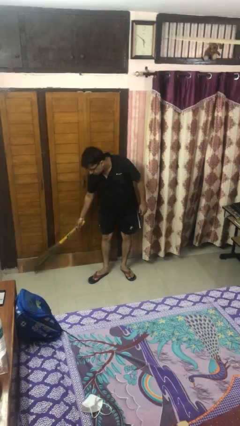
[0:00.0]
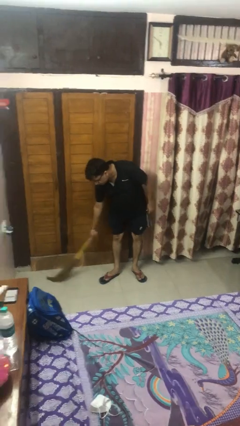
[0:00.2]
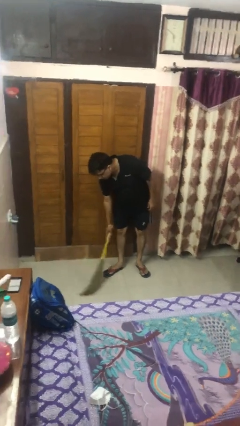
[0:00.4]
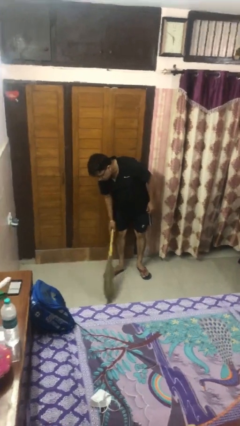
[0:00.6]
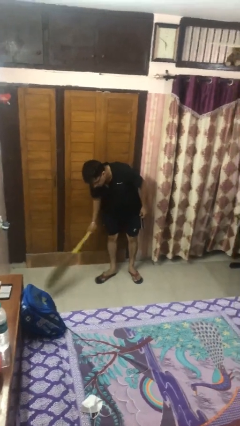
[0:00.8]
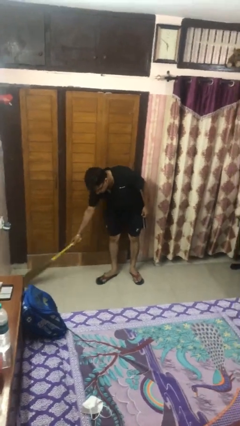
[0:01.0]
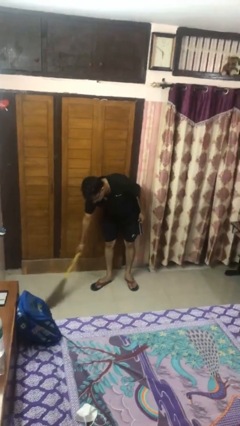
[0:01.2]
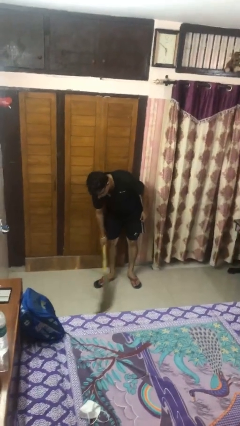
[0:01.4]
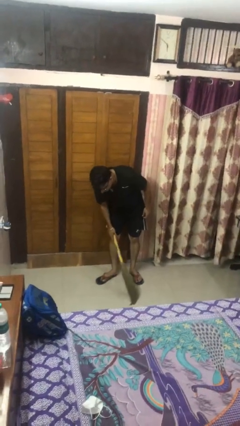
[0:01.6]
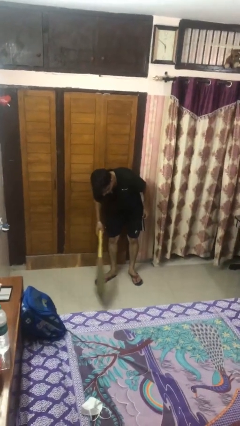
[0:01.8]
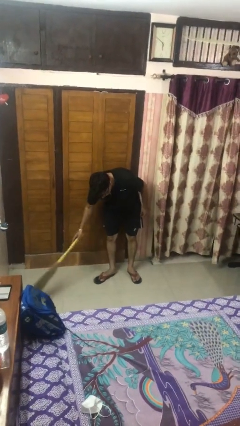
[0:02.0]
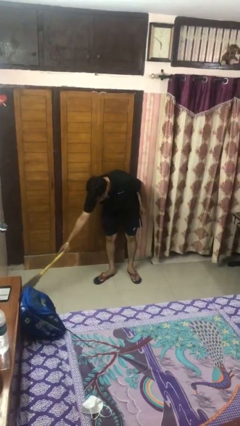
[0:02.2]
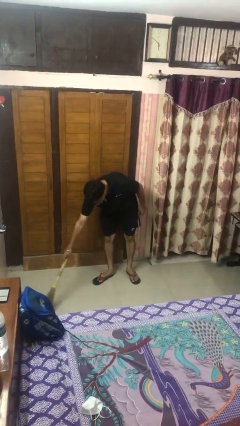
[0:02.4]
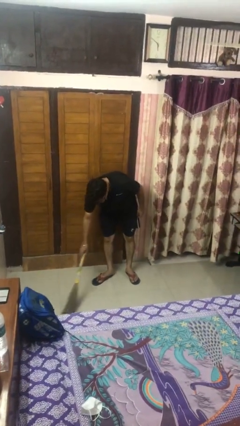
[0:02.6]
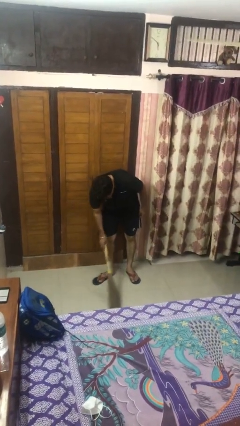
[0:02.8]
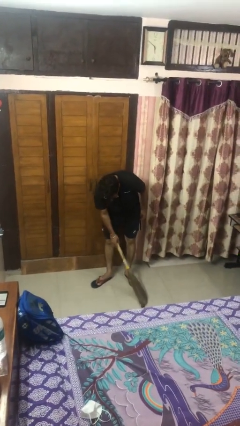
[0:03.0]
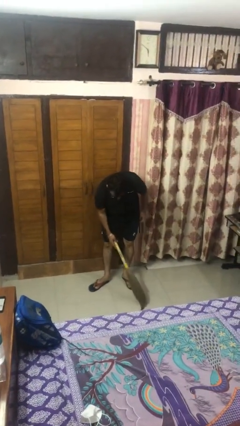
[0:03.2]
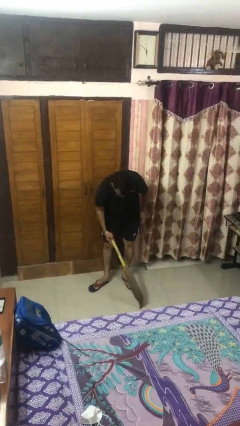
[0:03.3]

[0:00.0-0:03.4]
person sweeps floor

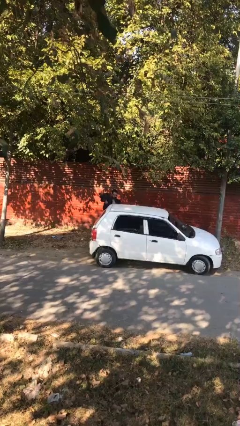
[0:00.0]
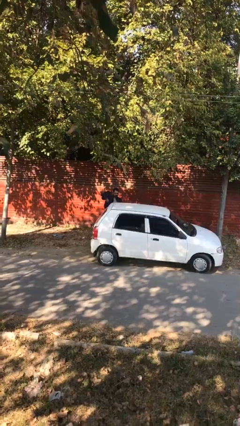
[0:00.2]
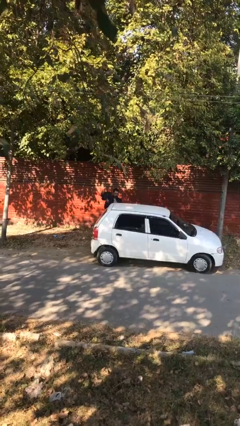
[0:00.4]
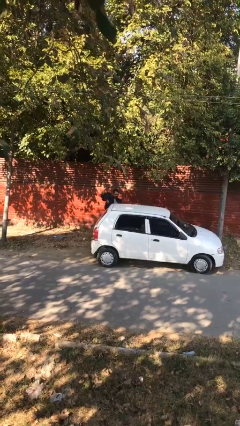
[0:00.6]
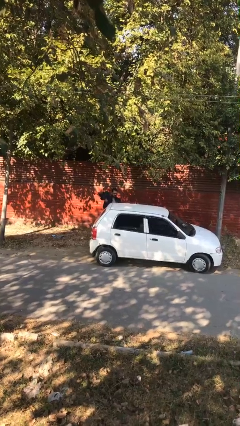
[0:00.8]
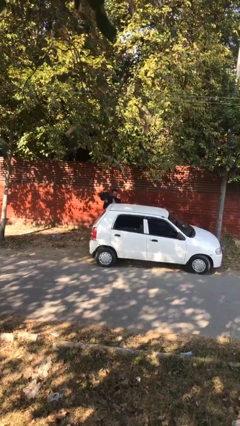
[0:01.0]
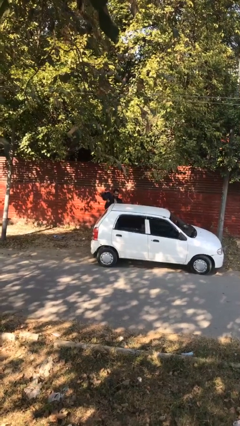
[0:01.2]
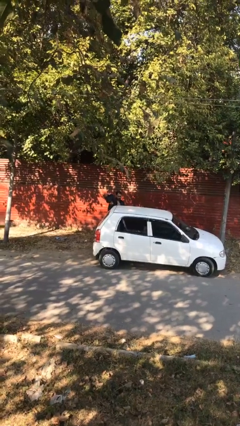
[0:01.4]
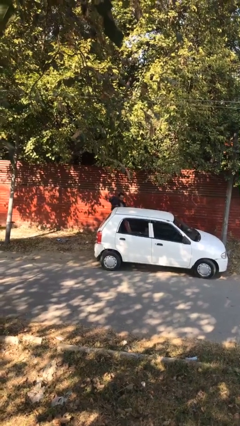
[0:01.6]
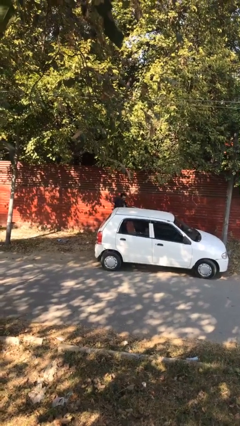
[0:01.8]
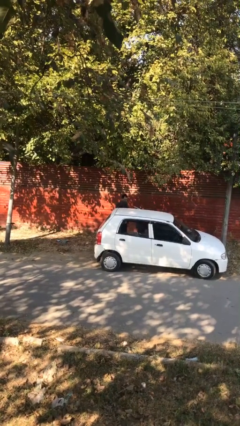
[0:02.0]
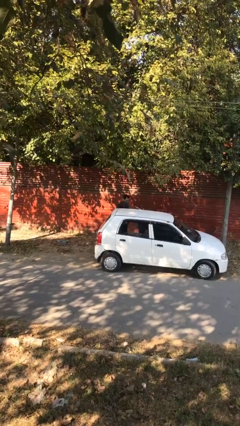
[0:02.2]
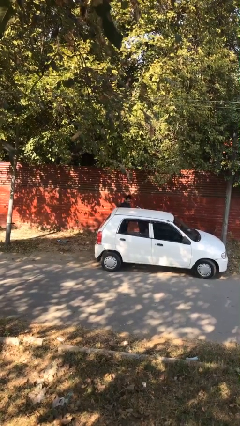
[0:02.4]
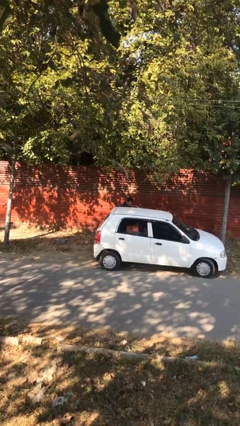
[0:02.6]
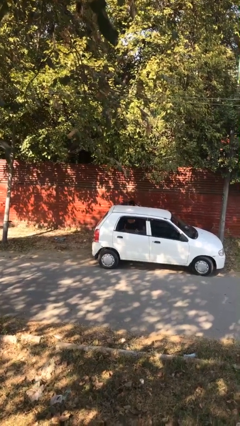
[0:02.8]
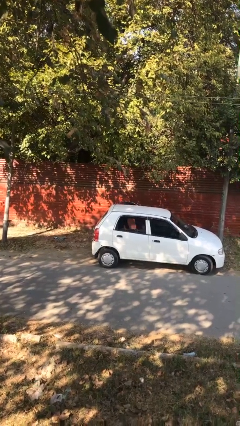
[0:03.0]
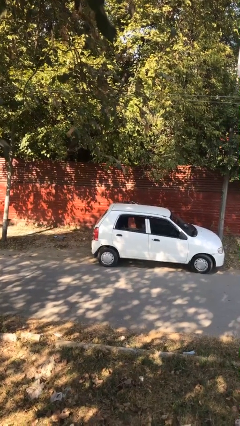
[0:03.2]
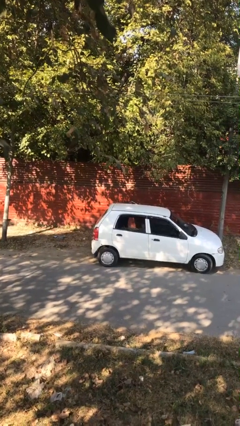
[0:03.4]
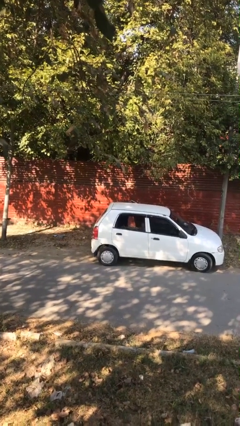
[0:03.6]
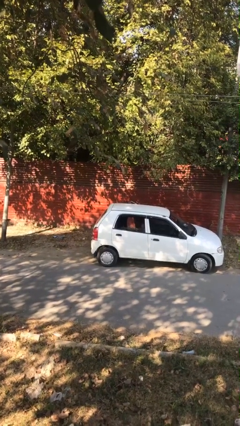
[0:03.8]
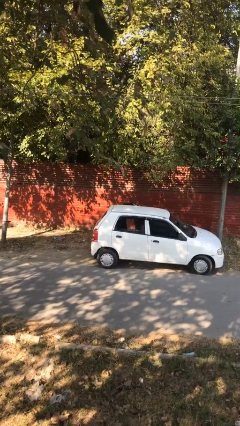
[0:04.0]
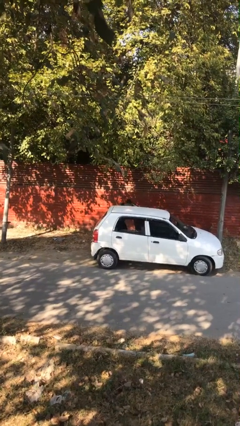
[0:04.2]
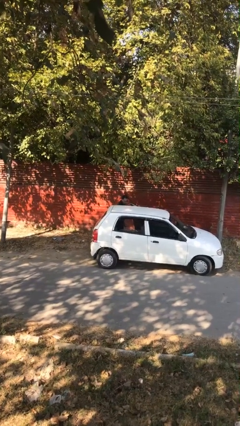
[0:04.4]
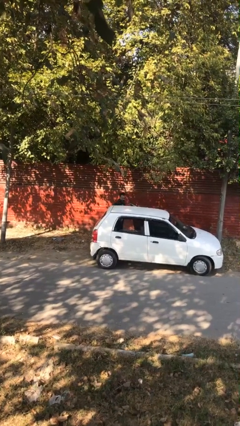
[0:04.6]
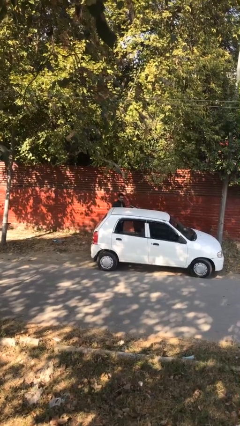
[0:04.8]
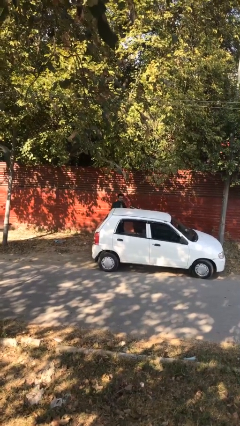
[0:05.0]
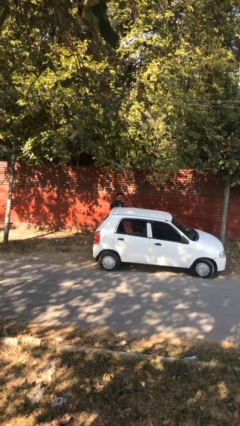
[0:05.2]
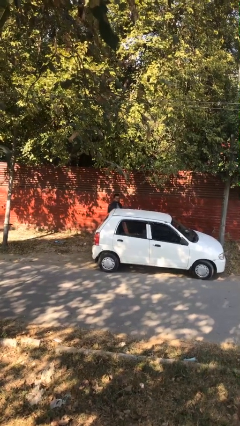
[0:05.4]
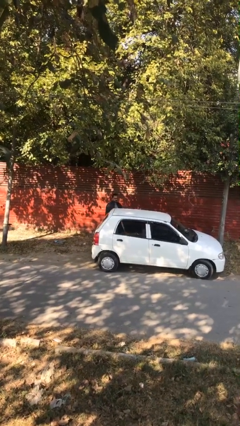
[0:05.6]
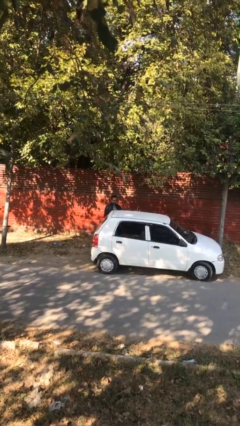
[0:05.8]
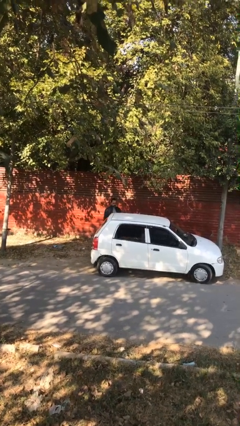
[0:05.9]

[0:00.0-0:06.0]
person loads car

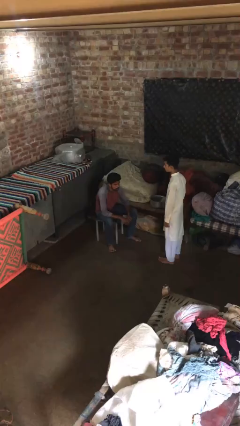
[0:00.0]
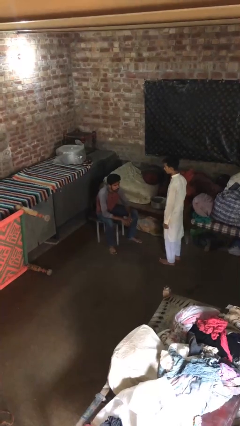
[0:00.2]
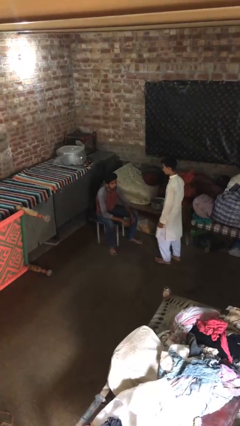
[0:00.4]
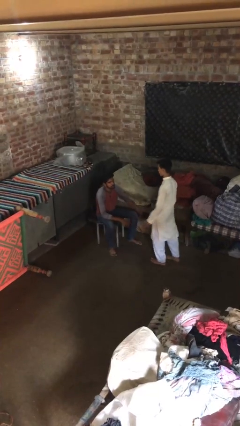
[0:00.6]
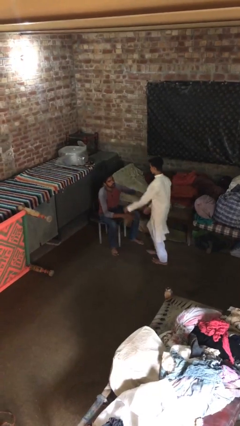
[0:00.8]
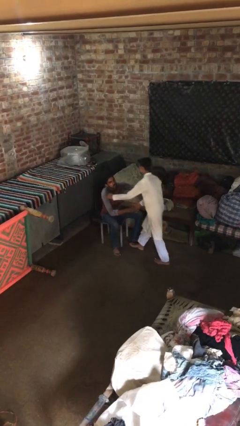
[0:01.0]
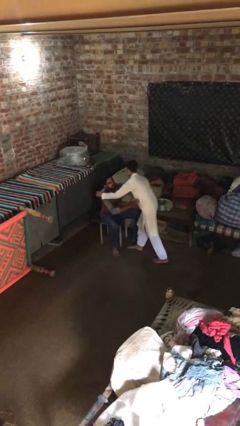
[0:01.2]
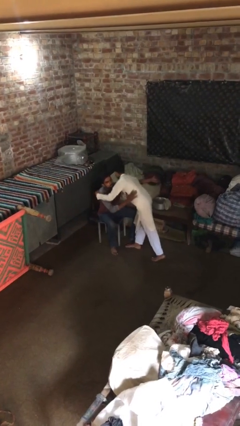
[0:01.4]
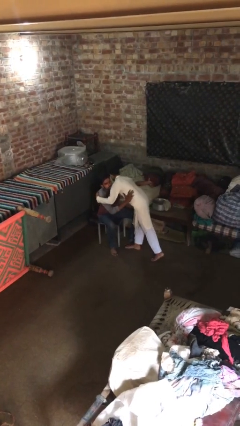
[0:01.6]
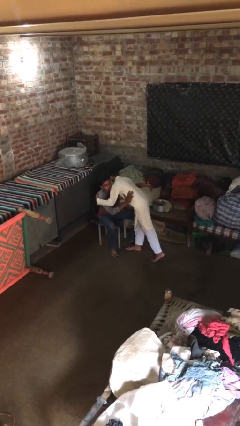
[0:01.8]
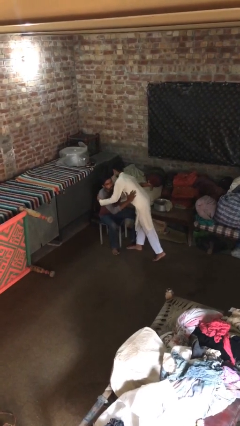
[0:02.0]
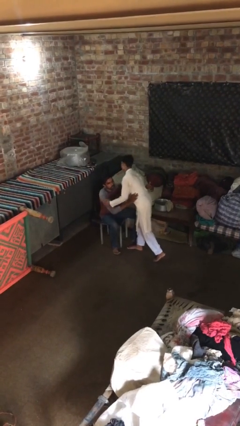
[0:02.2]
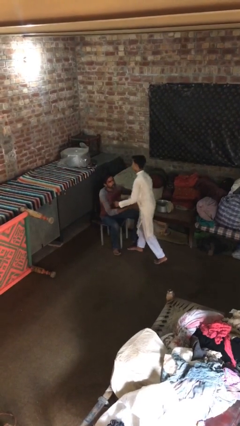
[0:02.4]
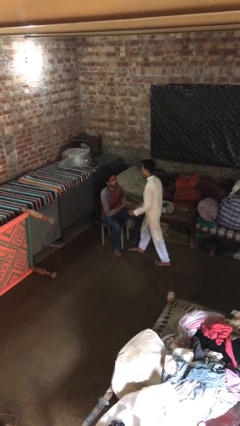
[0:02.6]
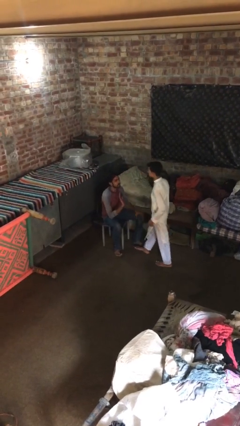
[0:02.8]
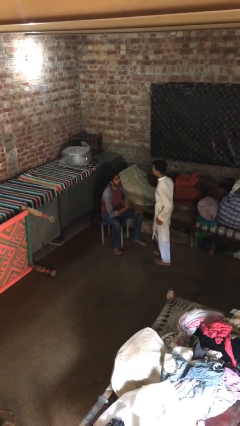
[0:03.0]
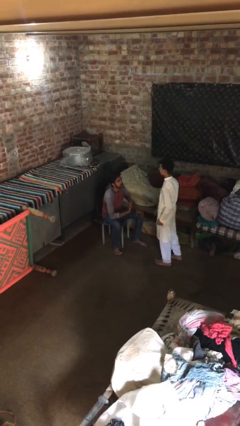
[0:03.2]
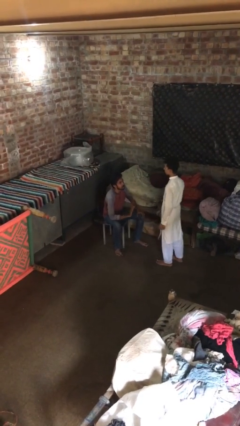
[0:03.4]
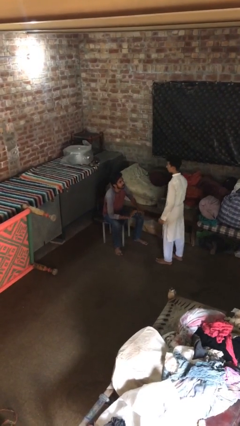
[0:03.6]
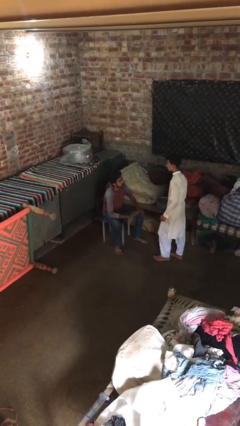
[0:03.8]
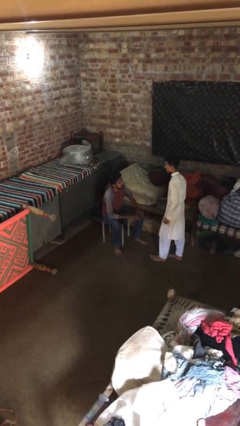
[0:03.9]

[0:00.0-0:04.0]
person embraces person

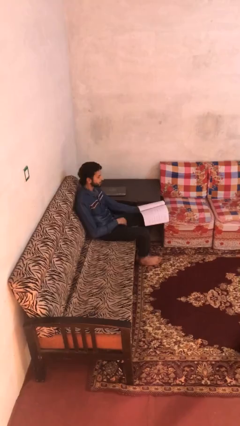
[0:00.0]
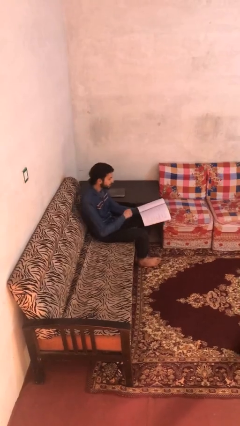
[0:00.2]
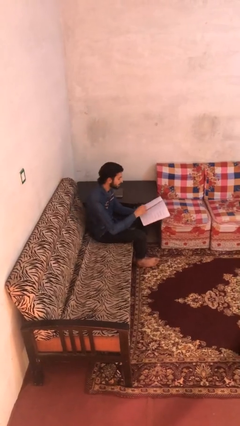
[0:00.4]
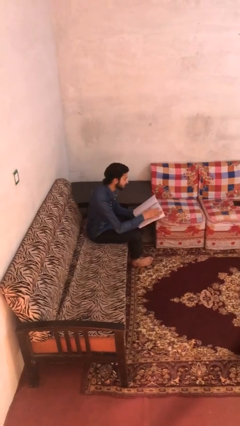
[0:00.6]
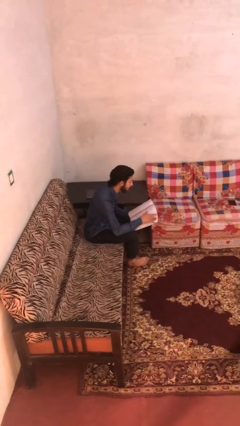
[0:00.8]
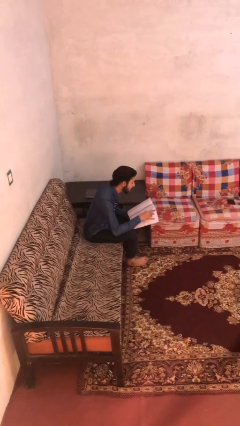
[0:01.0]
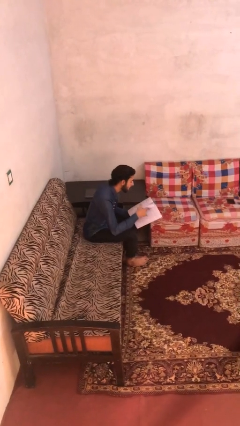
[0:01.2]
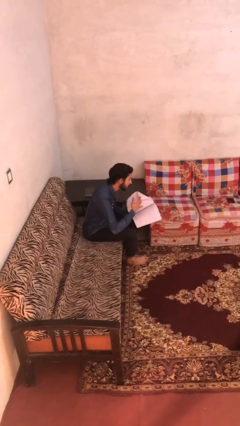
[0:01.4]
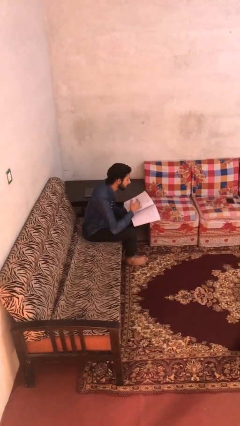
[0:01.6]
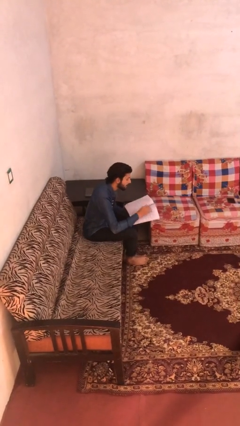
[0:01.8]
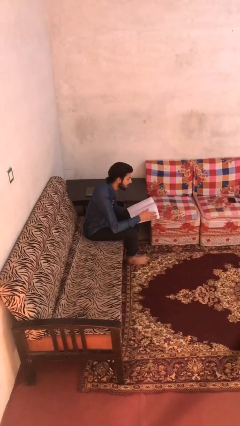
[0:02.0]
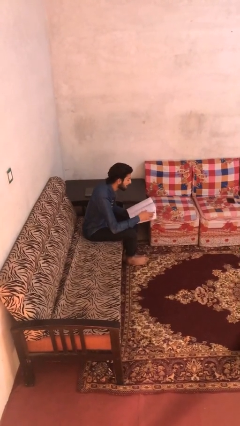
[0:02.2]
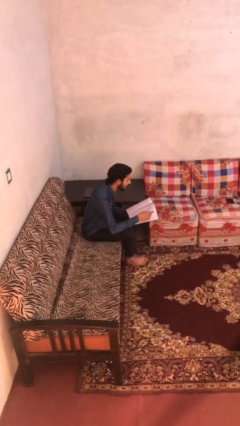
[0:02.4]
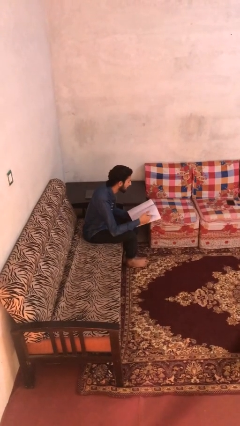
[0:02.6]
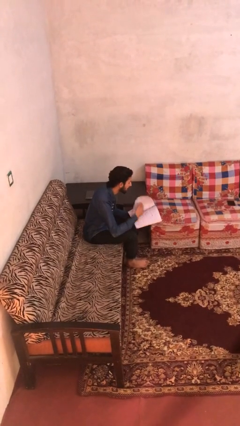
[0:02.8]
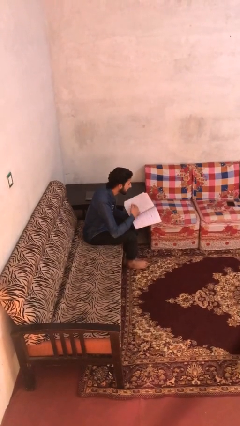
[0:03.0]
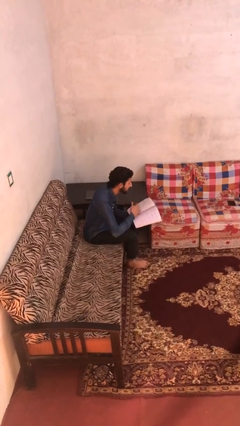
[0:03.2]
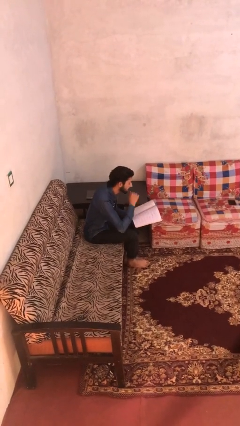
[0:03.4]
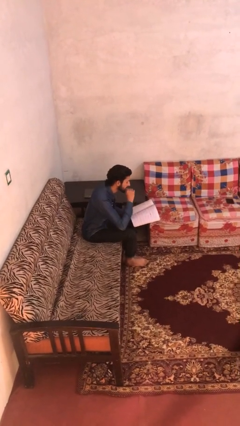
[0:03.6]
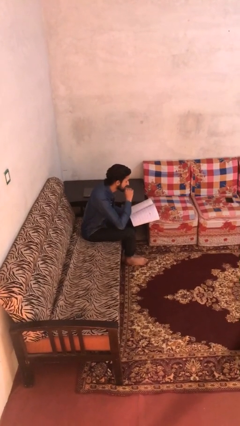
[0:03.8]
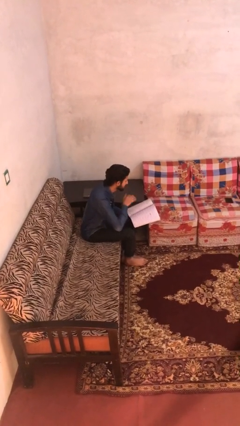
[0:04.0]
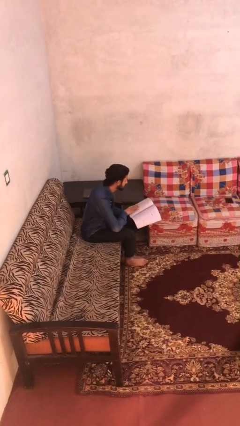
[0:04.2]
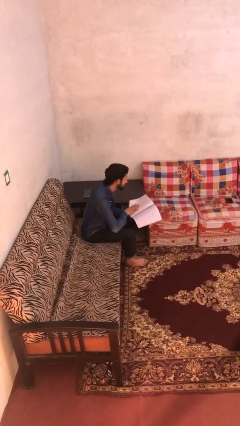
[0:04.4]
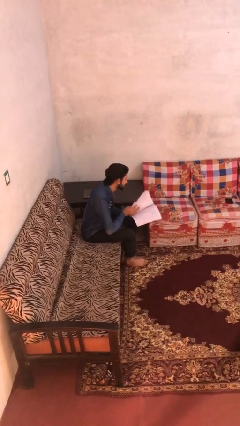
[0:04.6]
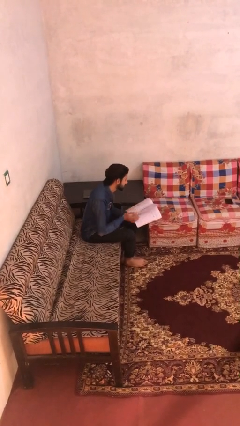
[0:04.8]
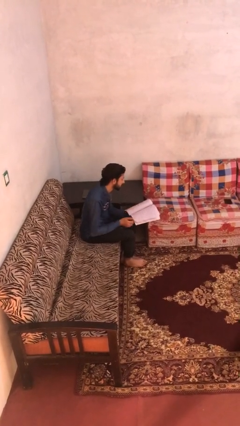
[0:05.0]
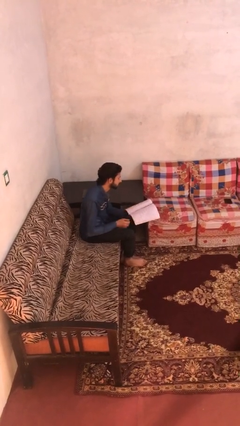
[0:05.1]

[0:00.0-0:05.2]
person reads document
